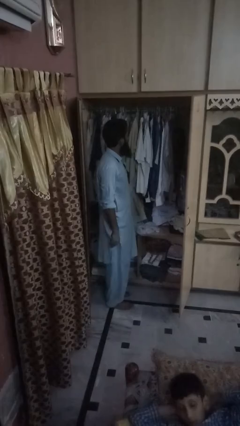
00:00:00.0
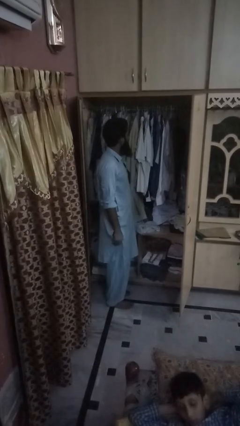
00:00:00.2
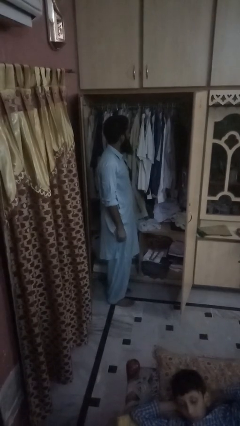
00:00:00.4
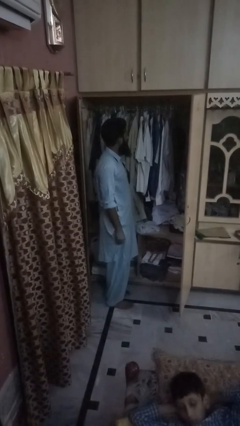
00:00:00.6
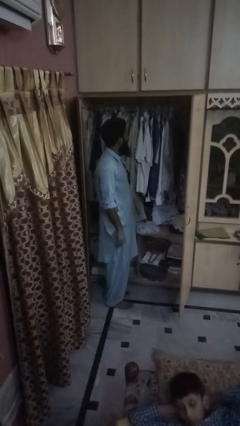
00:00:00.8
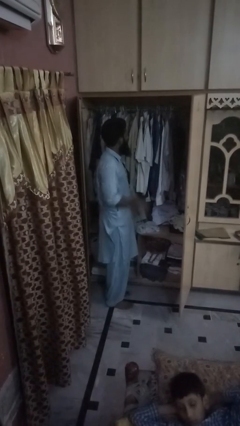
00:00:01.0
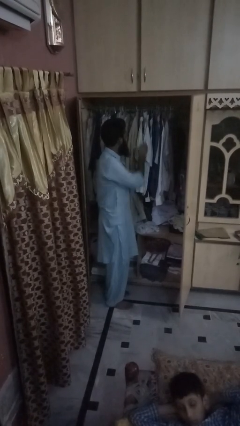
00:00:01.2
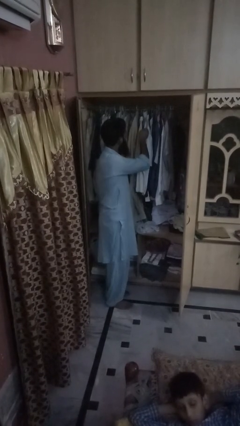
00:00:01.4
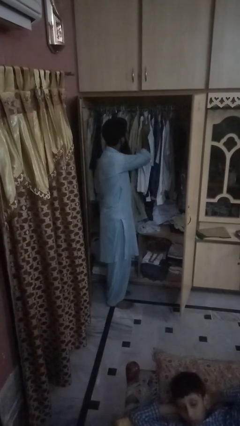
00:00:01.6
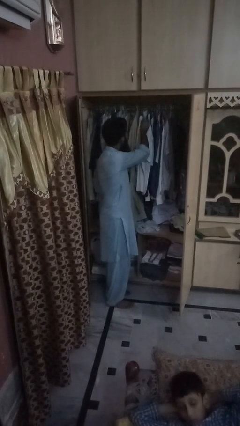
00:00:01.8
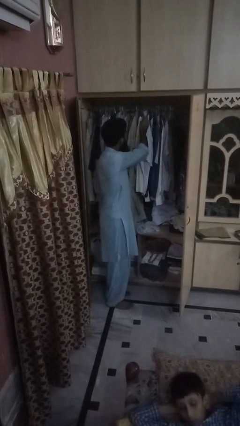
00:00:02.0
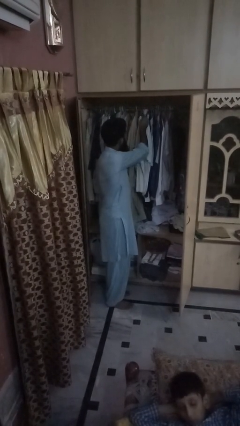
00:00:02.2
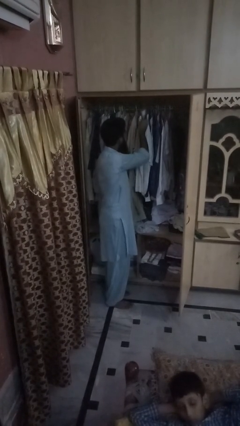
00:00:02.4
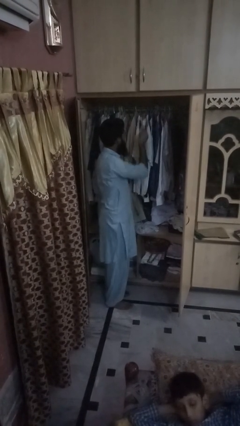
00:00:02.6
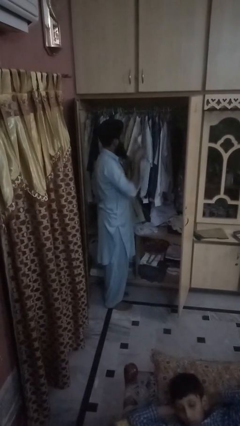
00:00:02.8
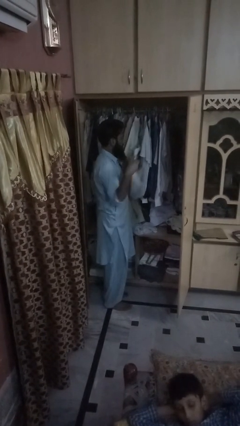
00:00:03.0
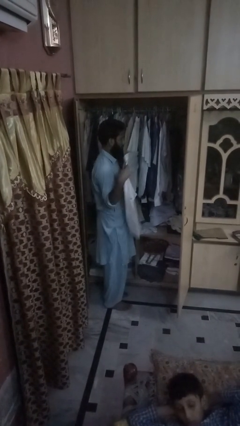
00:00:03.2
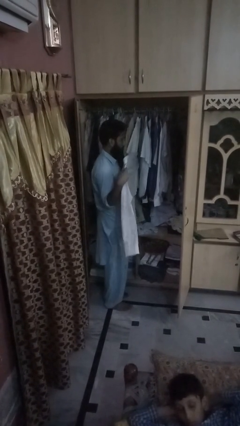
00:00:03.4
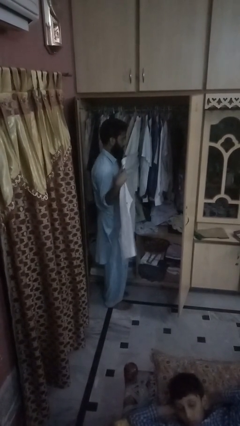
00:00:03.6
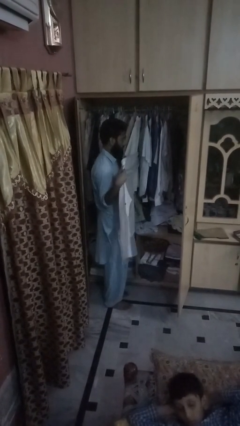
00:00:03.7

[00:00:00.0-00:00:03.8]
person puts clothes into closet

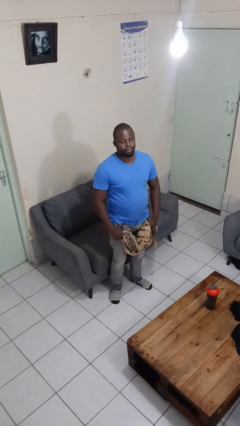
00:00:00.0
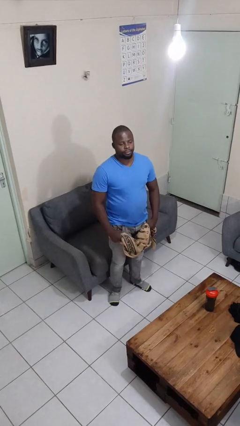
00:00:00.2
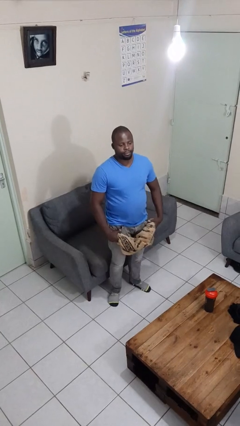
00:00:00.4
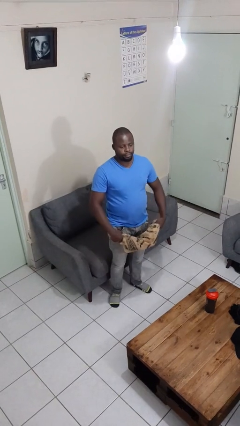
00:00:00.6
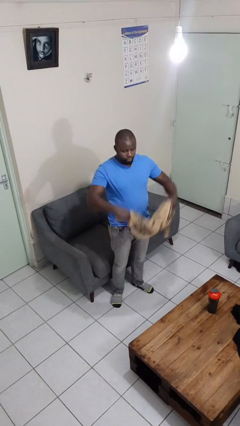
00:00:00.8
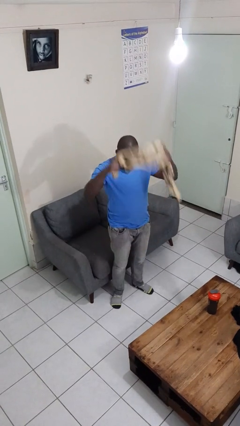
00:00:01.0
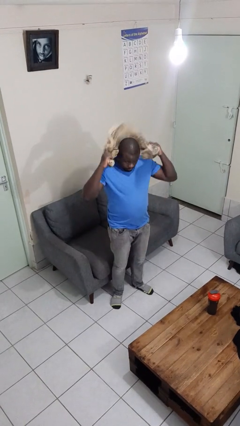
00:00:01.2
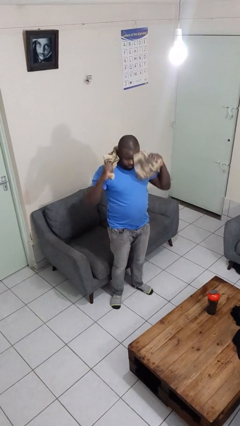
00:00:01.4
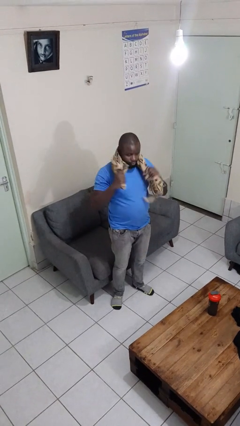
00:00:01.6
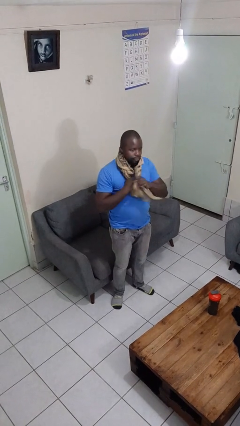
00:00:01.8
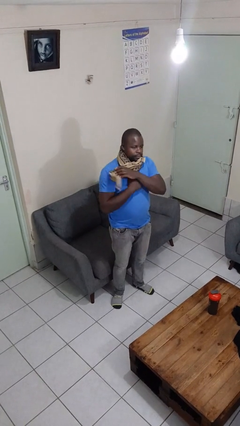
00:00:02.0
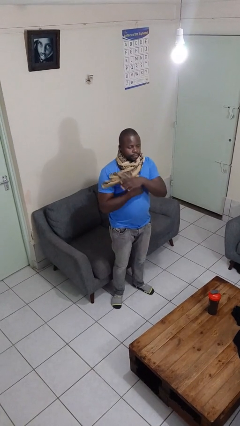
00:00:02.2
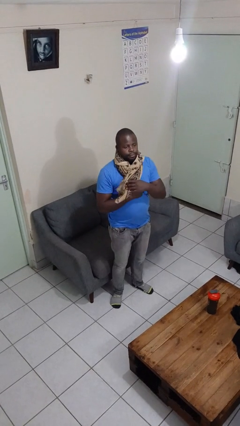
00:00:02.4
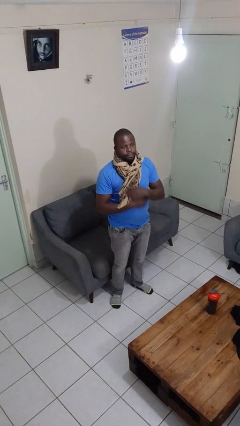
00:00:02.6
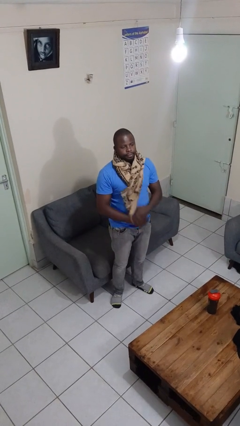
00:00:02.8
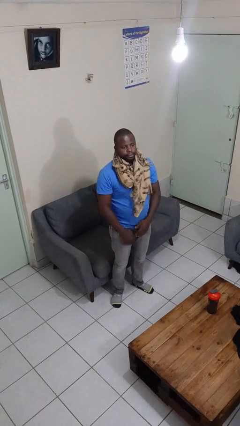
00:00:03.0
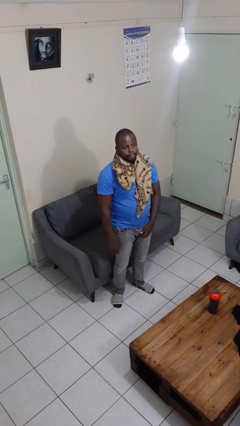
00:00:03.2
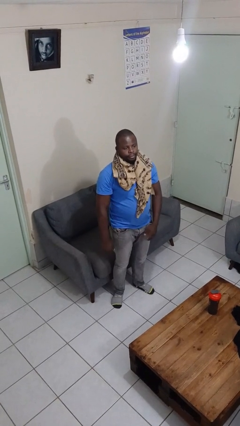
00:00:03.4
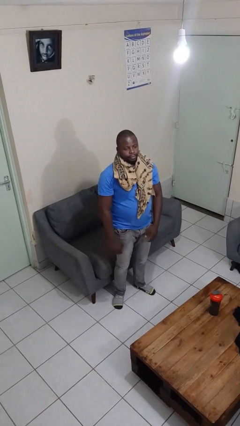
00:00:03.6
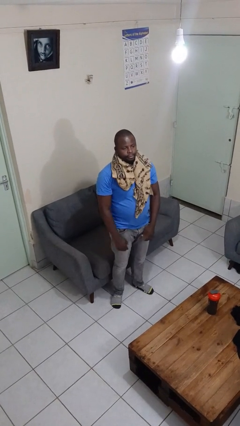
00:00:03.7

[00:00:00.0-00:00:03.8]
person puts on scarf

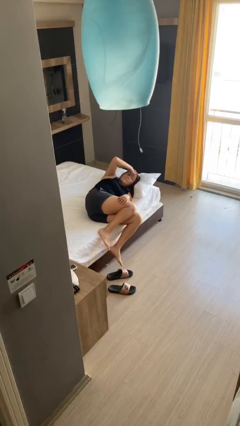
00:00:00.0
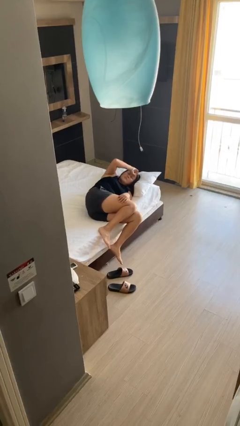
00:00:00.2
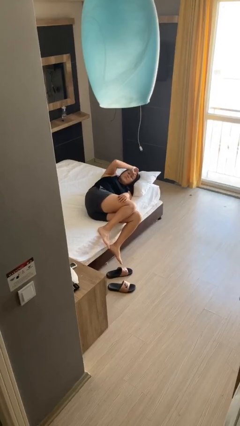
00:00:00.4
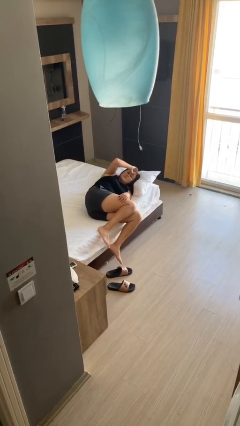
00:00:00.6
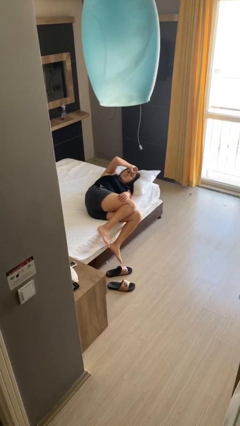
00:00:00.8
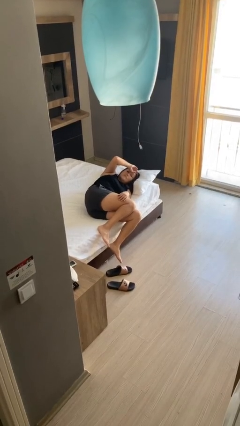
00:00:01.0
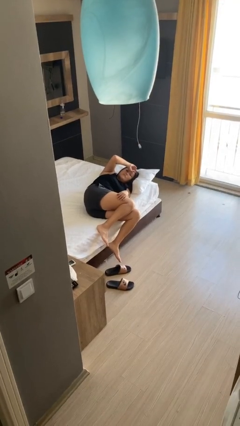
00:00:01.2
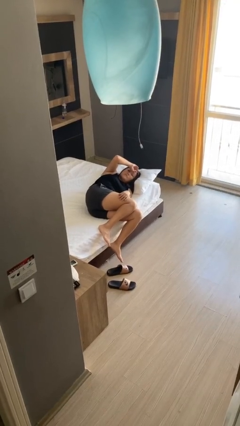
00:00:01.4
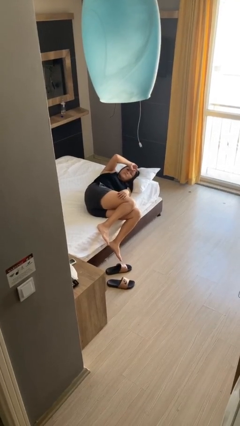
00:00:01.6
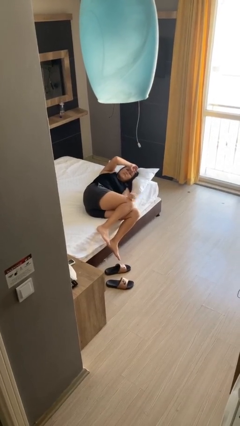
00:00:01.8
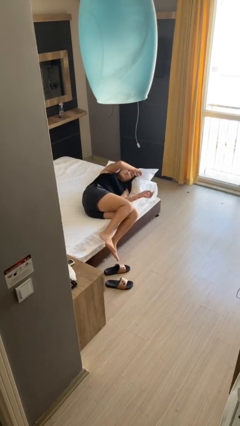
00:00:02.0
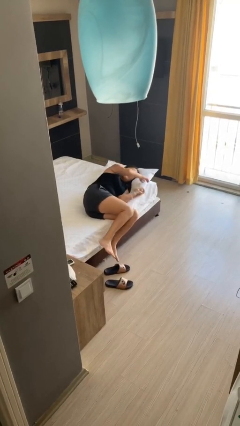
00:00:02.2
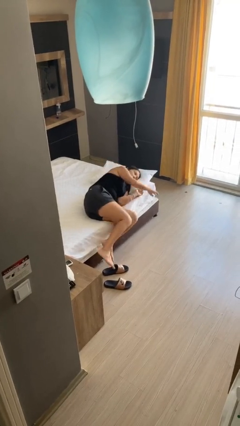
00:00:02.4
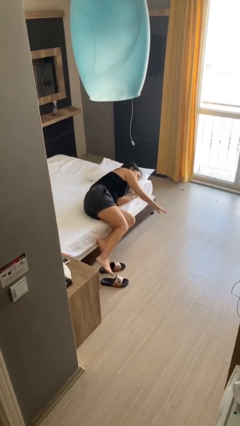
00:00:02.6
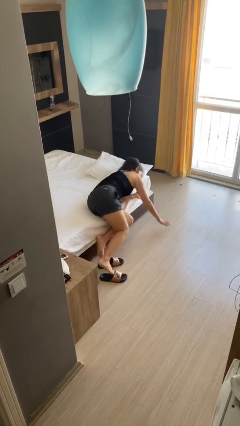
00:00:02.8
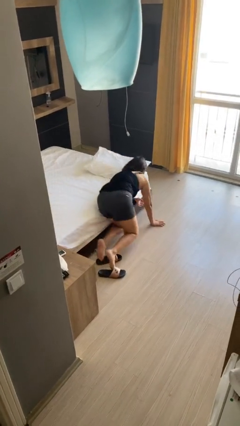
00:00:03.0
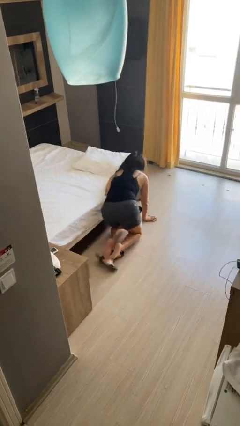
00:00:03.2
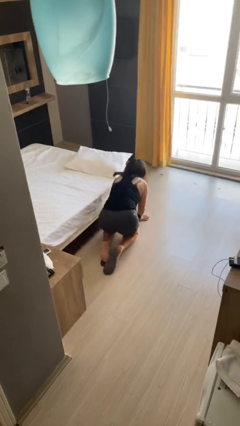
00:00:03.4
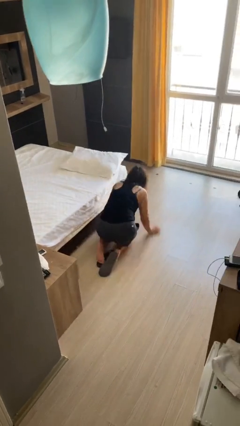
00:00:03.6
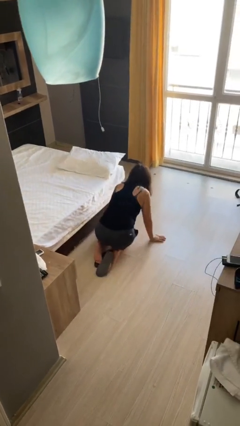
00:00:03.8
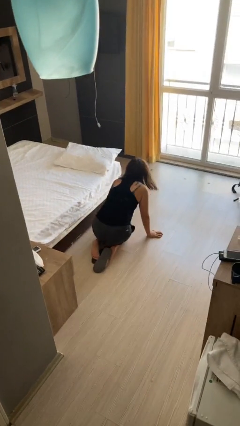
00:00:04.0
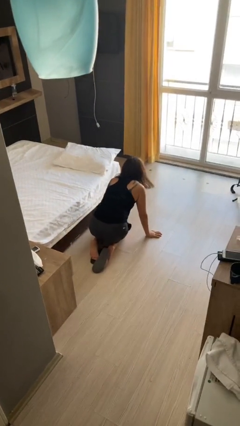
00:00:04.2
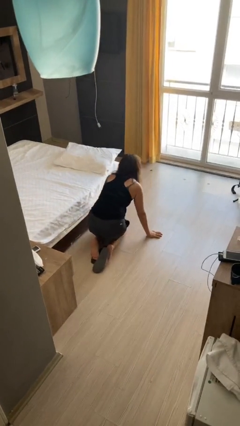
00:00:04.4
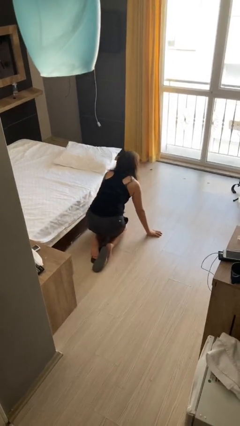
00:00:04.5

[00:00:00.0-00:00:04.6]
person falls from bed

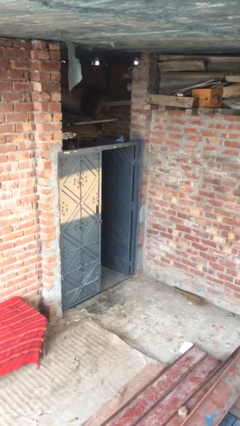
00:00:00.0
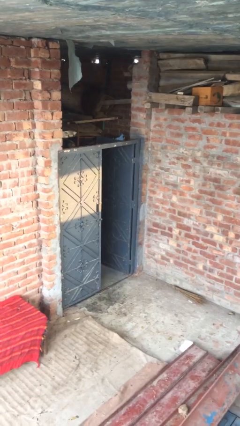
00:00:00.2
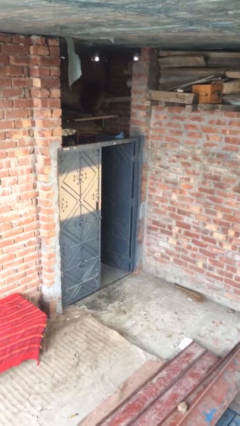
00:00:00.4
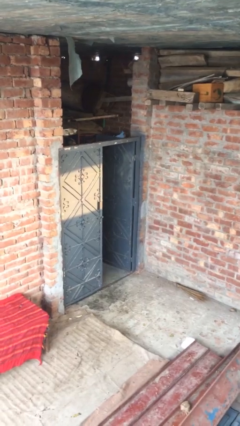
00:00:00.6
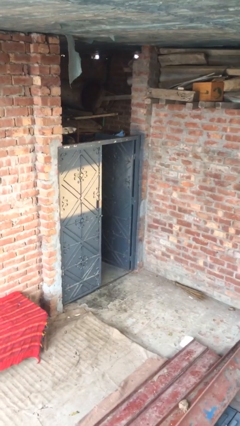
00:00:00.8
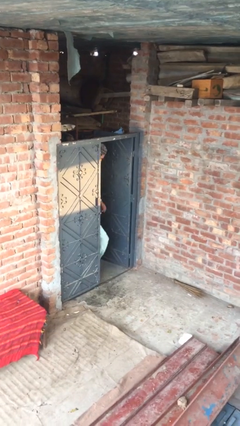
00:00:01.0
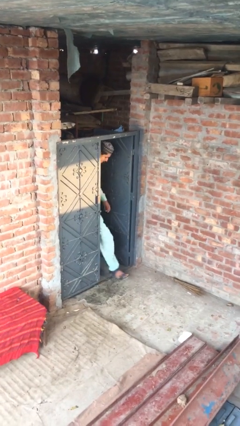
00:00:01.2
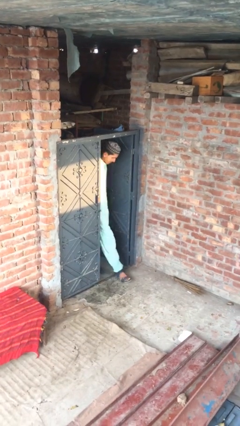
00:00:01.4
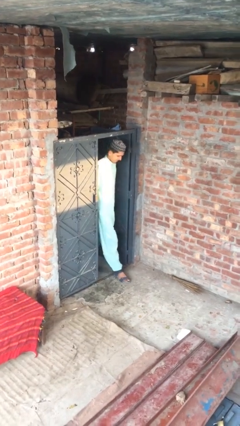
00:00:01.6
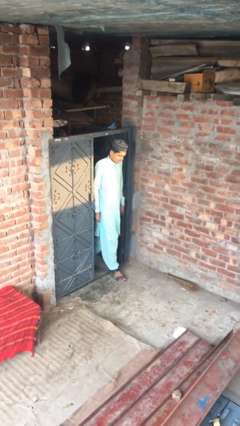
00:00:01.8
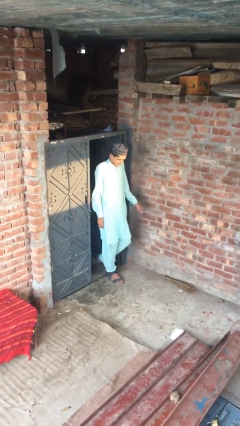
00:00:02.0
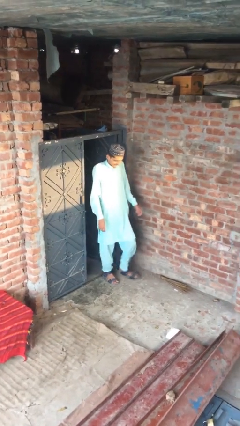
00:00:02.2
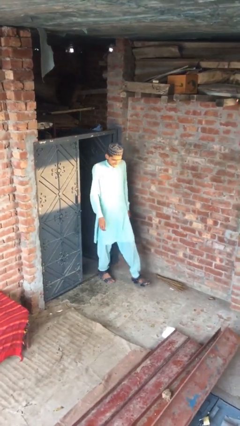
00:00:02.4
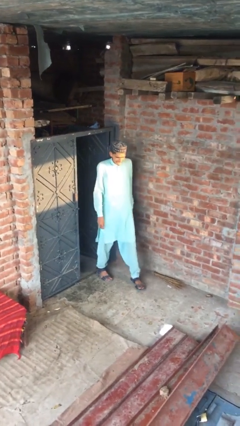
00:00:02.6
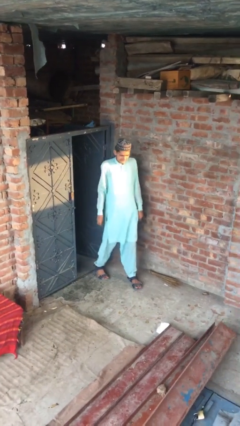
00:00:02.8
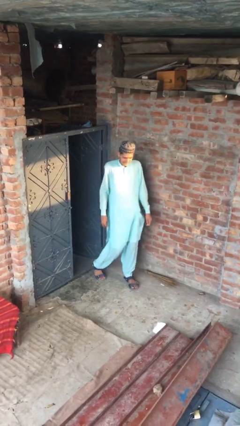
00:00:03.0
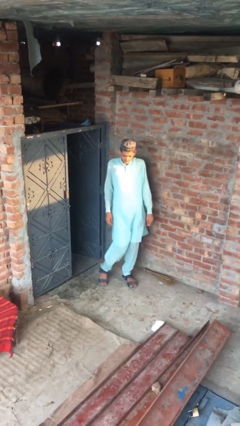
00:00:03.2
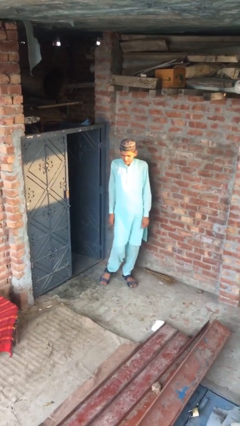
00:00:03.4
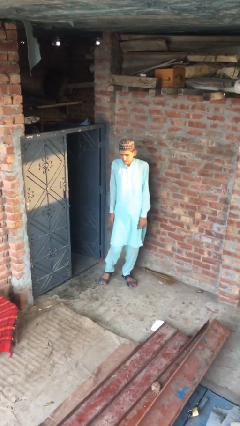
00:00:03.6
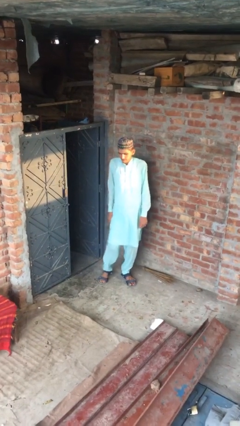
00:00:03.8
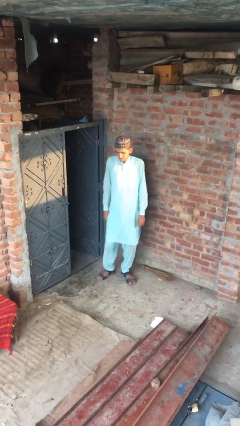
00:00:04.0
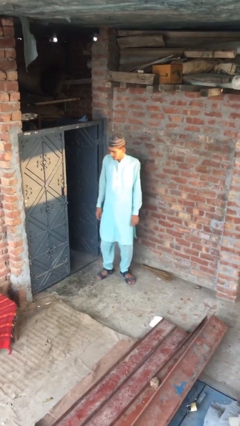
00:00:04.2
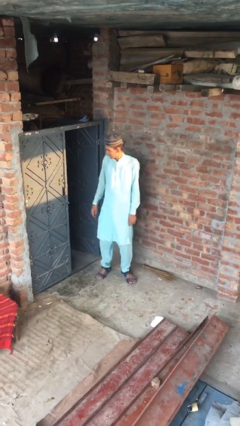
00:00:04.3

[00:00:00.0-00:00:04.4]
person enters scene through structure

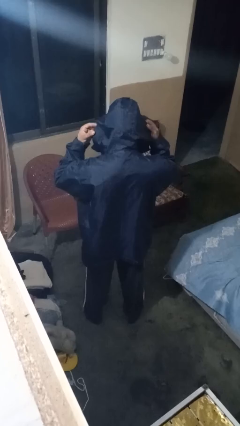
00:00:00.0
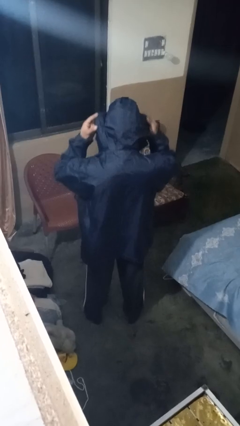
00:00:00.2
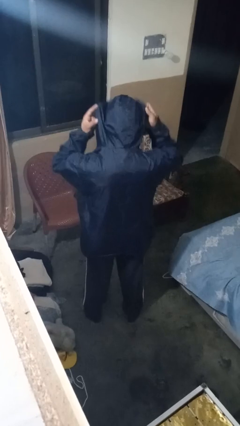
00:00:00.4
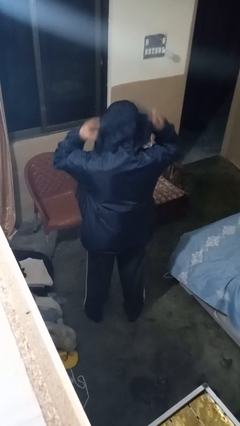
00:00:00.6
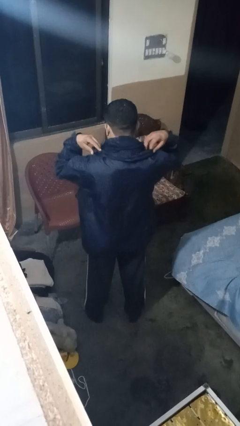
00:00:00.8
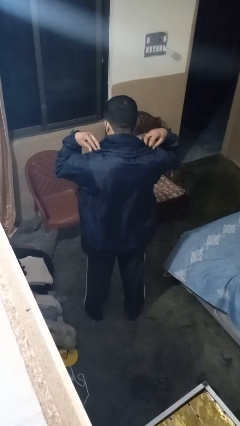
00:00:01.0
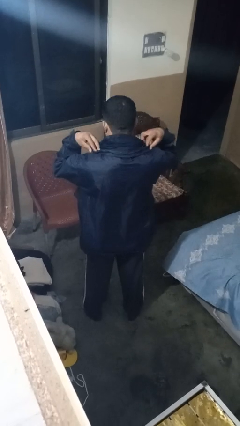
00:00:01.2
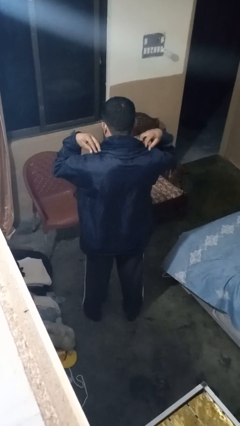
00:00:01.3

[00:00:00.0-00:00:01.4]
person takes off hoodie
